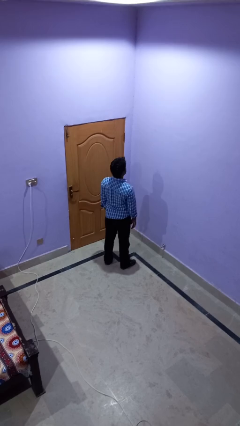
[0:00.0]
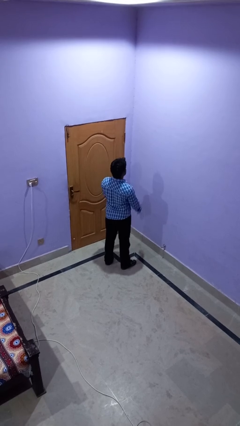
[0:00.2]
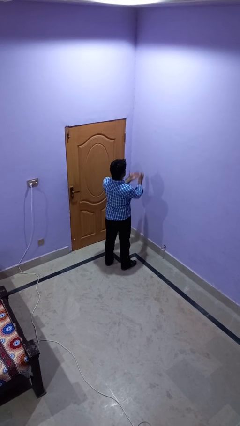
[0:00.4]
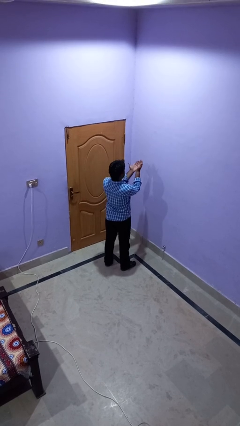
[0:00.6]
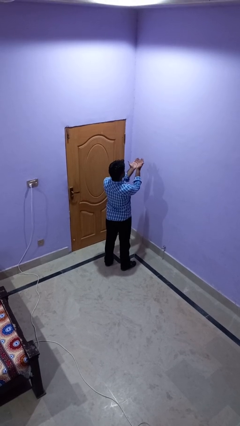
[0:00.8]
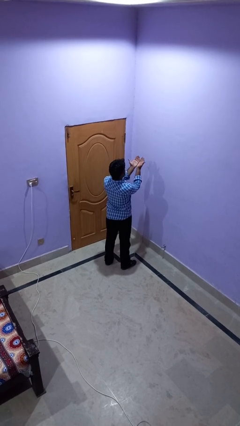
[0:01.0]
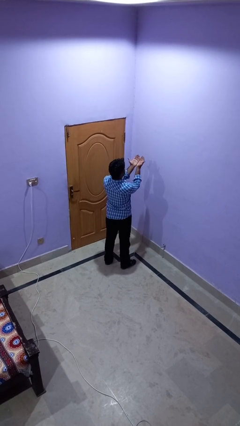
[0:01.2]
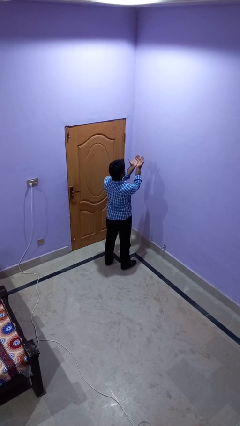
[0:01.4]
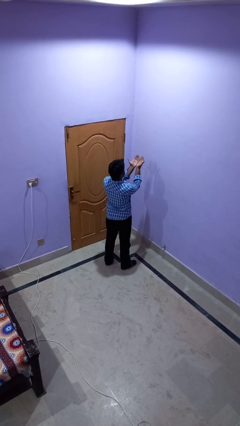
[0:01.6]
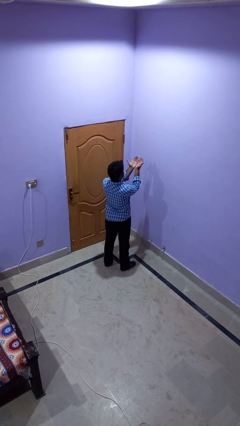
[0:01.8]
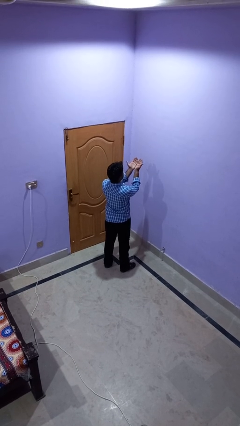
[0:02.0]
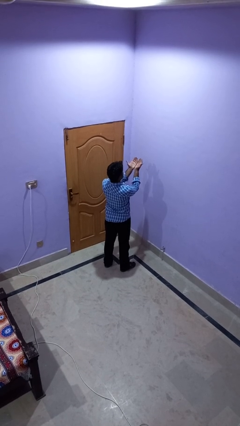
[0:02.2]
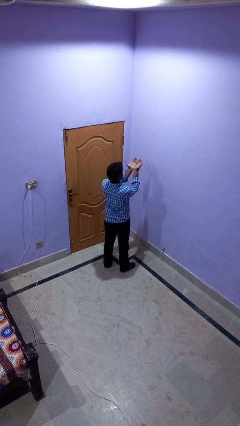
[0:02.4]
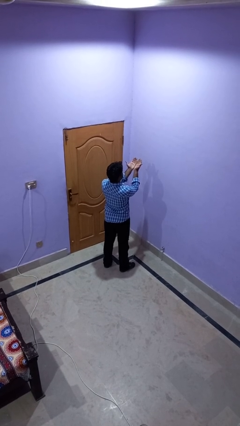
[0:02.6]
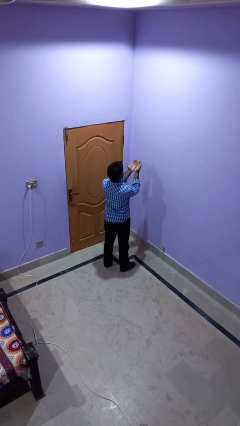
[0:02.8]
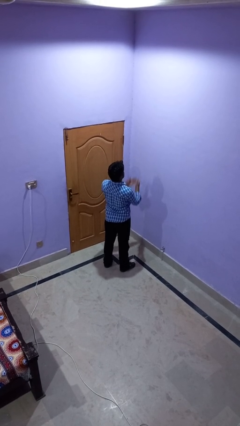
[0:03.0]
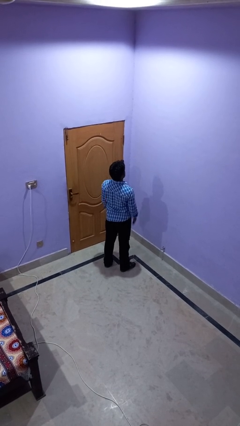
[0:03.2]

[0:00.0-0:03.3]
person prays

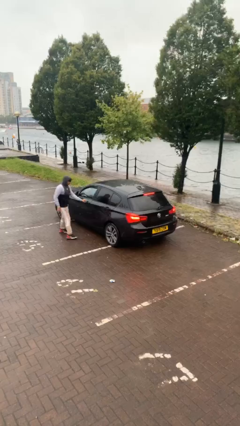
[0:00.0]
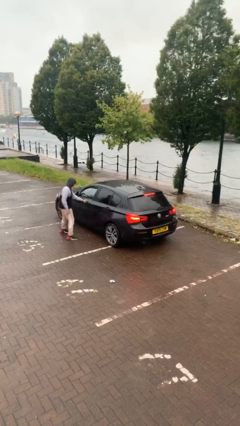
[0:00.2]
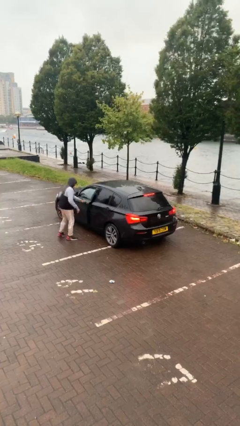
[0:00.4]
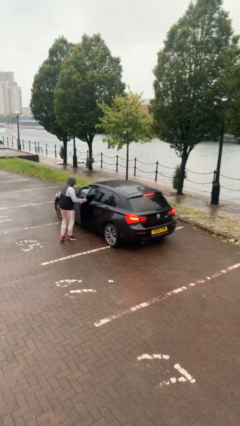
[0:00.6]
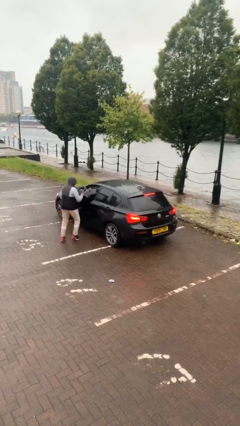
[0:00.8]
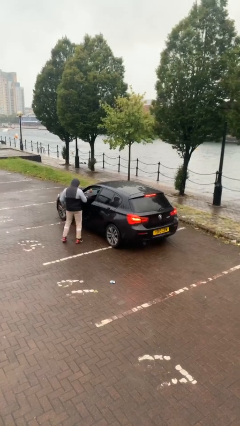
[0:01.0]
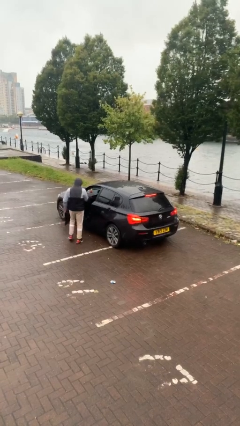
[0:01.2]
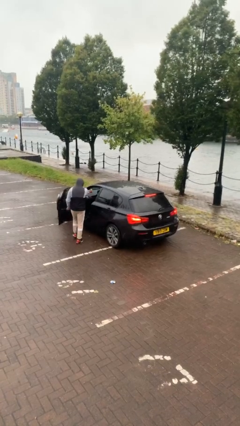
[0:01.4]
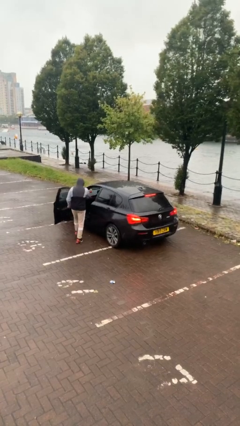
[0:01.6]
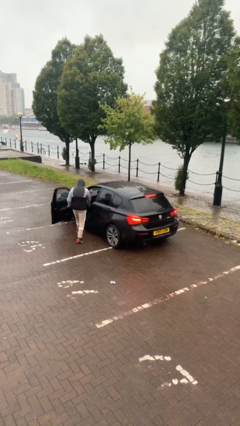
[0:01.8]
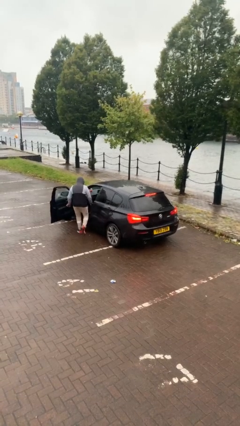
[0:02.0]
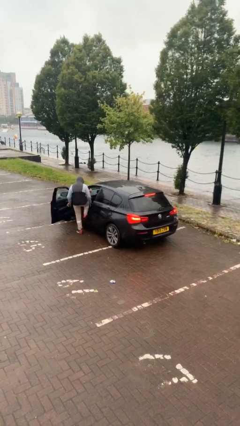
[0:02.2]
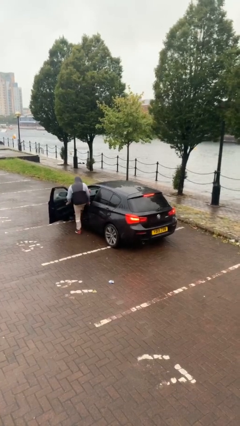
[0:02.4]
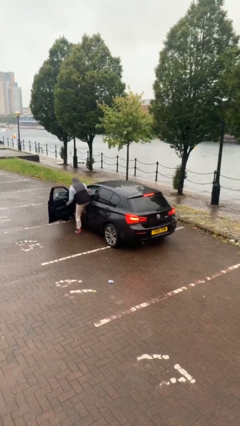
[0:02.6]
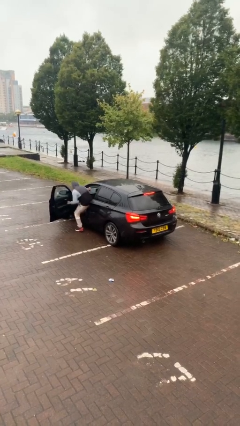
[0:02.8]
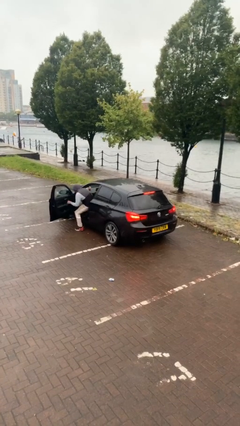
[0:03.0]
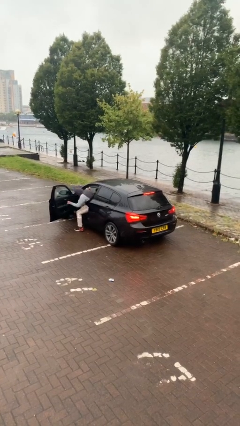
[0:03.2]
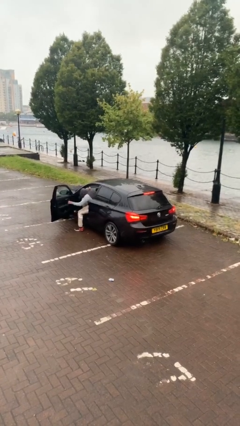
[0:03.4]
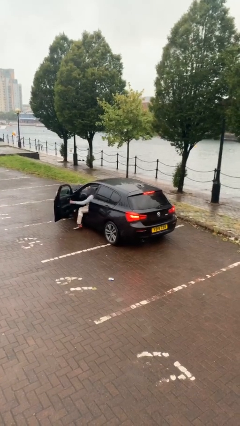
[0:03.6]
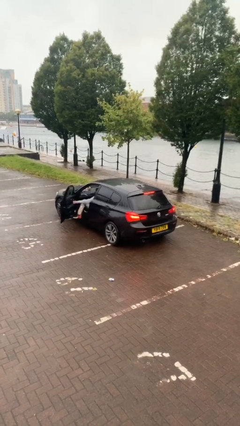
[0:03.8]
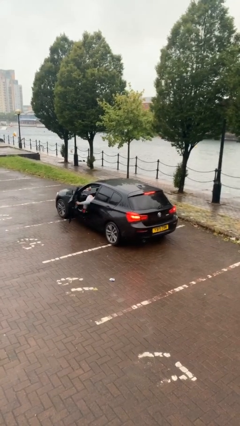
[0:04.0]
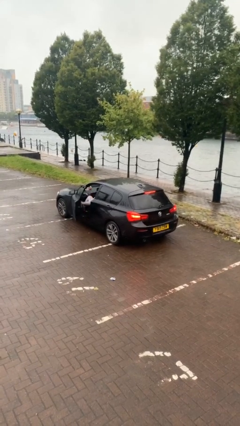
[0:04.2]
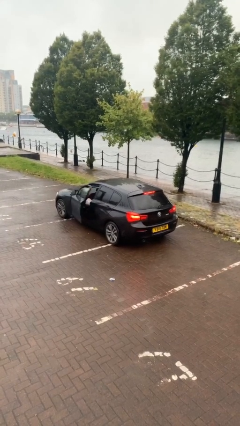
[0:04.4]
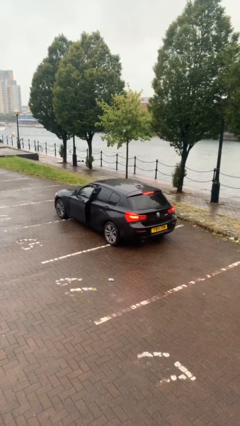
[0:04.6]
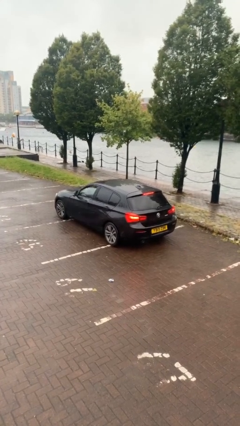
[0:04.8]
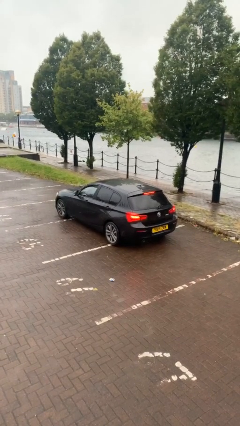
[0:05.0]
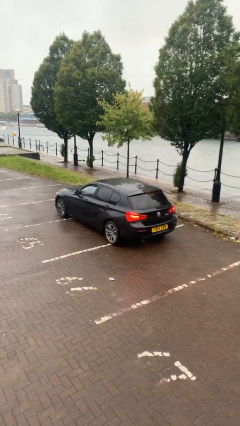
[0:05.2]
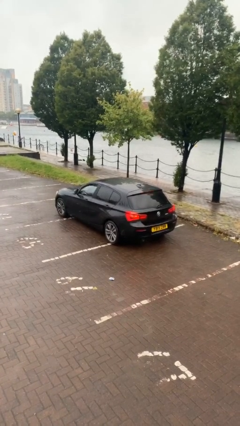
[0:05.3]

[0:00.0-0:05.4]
car picks up person

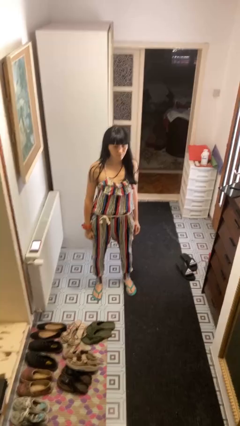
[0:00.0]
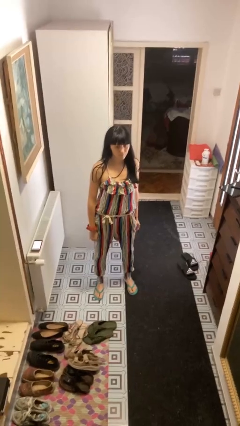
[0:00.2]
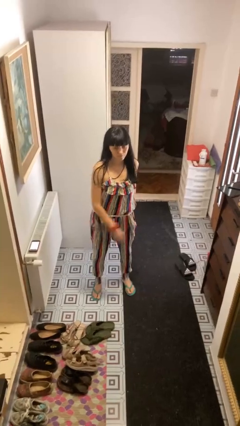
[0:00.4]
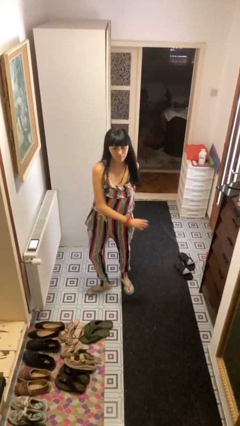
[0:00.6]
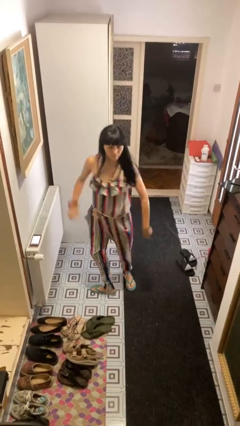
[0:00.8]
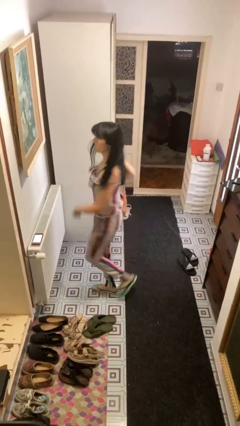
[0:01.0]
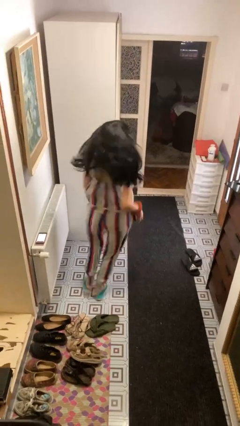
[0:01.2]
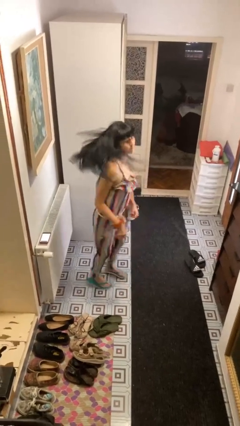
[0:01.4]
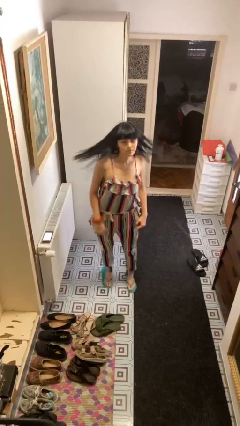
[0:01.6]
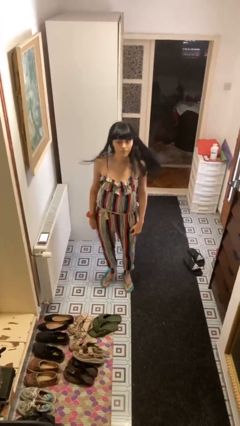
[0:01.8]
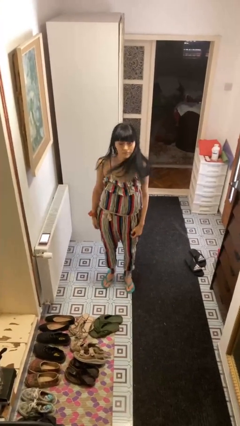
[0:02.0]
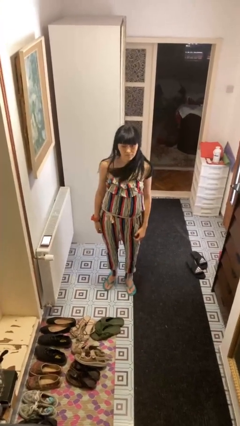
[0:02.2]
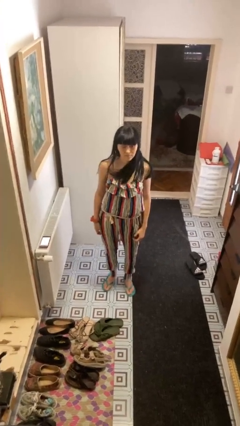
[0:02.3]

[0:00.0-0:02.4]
person twirls

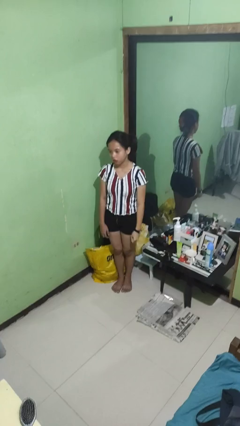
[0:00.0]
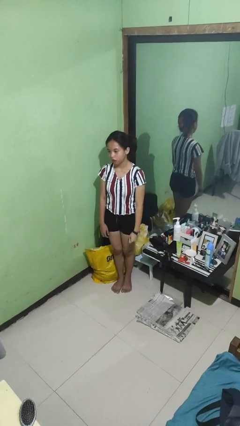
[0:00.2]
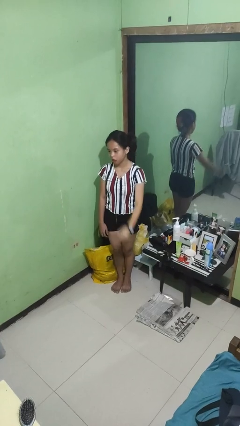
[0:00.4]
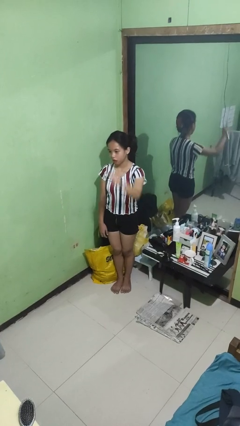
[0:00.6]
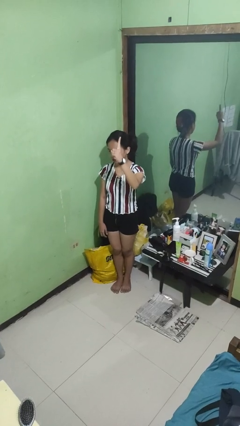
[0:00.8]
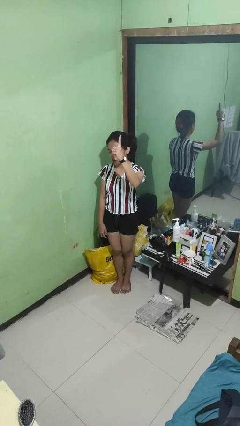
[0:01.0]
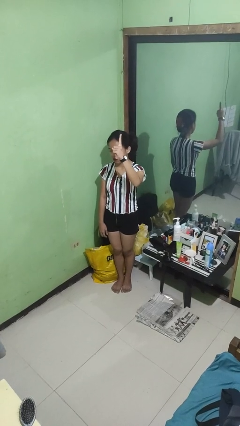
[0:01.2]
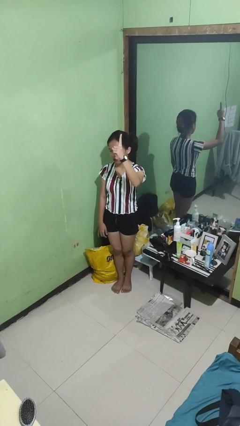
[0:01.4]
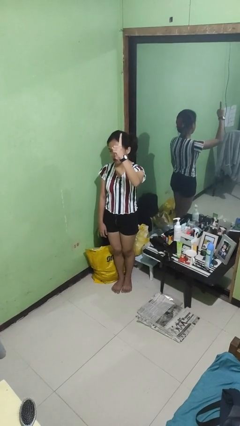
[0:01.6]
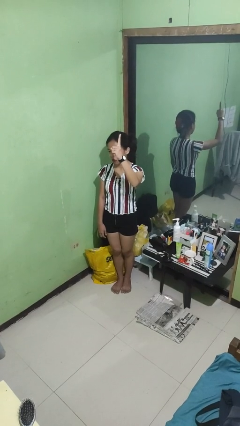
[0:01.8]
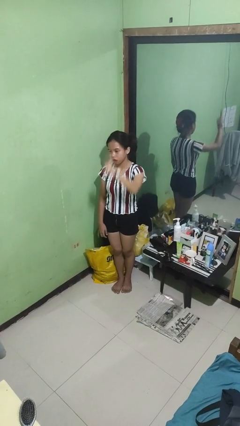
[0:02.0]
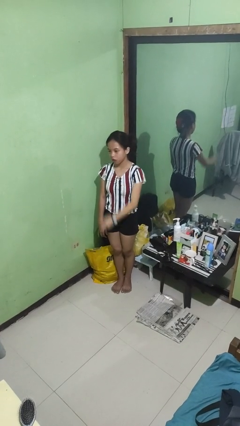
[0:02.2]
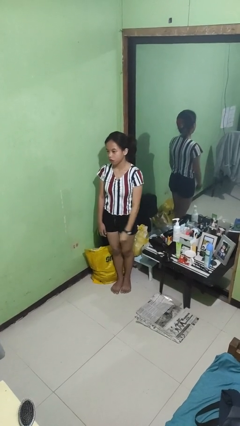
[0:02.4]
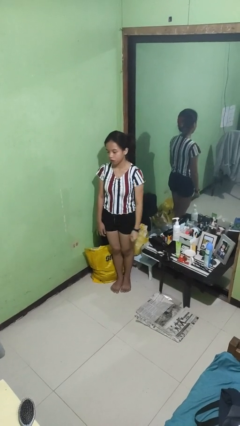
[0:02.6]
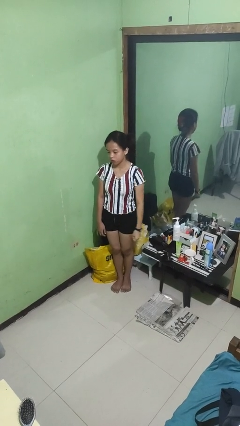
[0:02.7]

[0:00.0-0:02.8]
person gestures number one

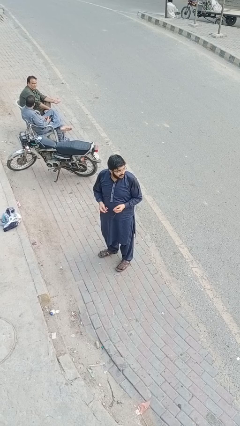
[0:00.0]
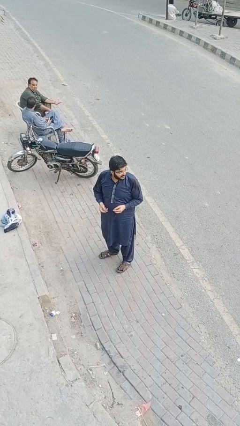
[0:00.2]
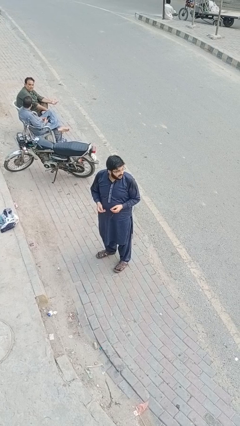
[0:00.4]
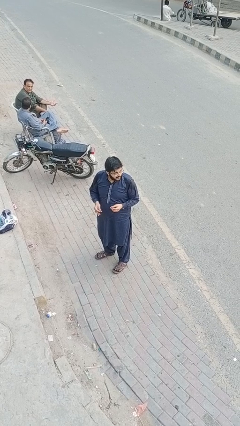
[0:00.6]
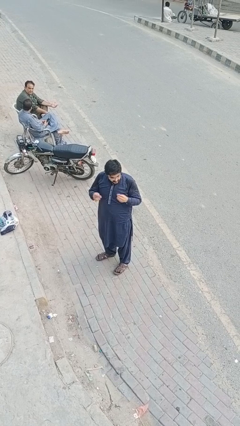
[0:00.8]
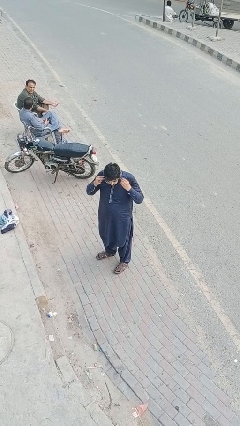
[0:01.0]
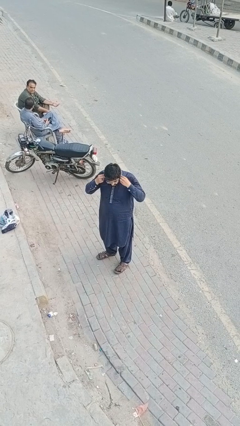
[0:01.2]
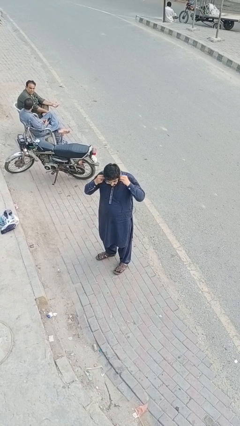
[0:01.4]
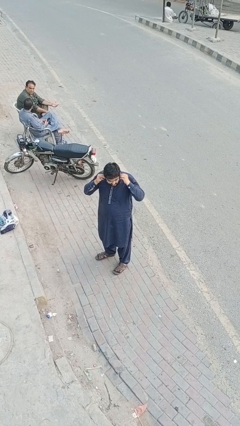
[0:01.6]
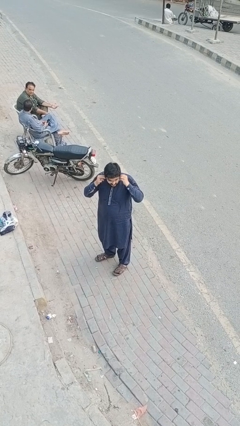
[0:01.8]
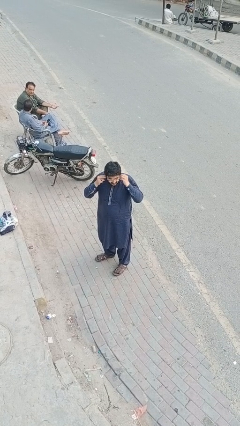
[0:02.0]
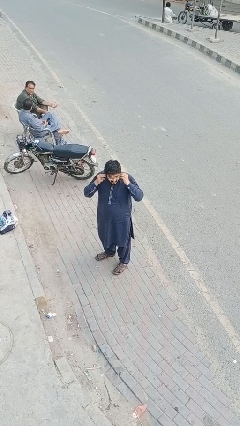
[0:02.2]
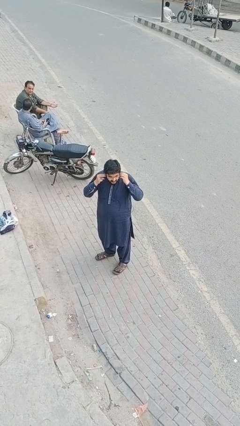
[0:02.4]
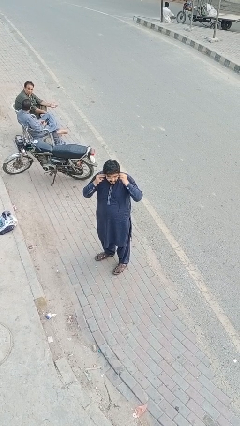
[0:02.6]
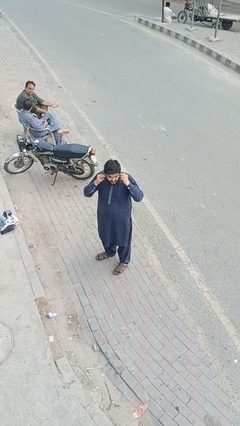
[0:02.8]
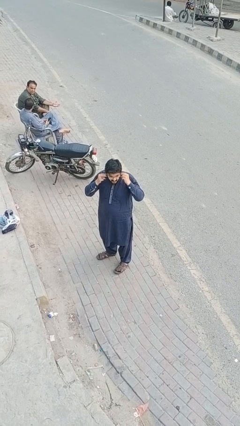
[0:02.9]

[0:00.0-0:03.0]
person puts on headphones

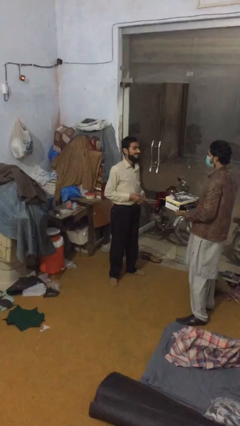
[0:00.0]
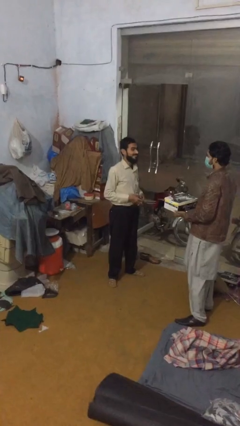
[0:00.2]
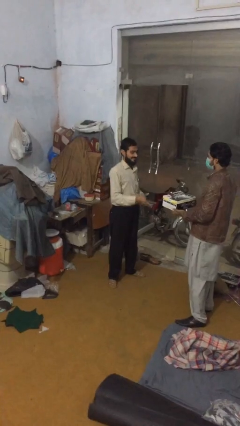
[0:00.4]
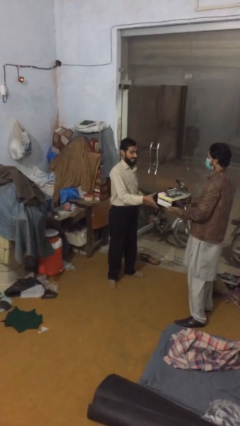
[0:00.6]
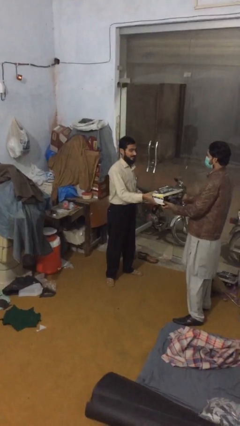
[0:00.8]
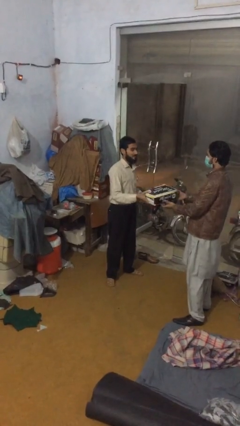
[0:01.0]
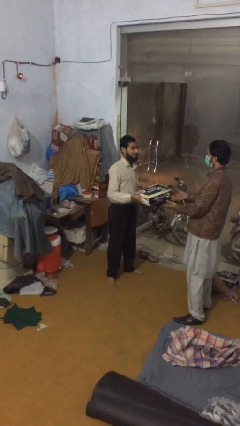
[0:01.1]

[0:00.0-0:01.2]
person transfers object to person
